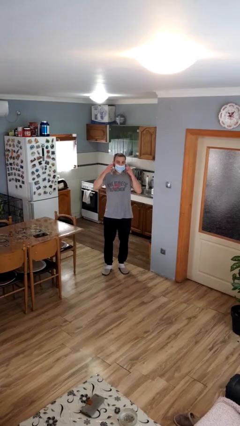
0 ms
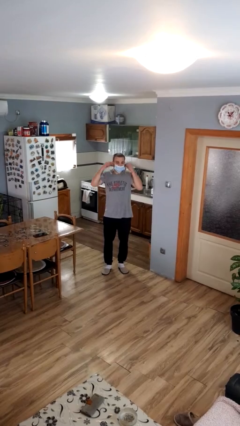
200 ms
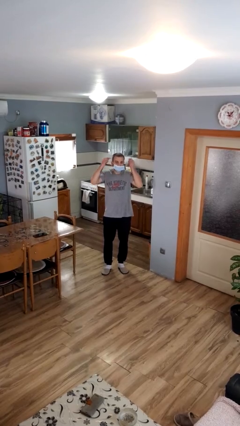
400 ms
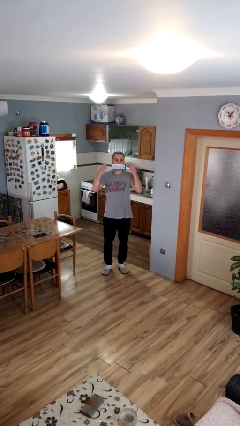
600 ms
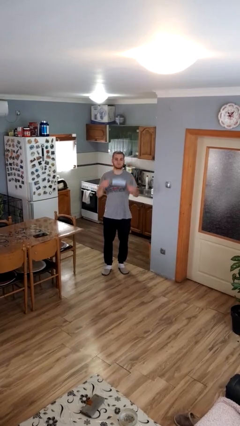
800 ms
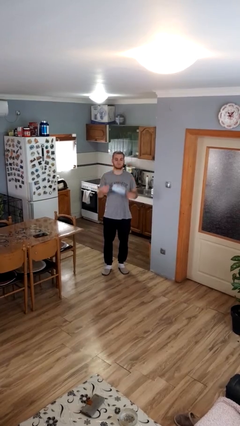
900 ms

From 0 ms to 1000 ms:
person takes off facemask

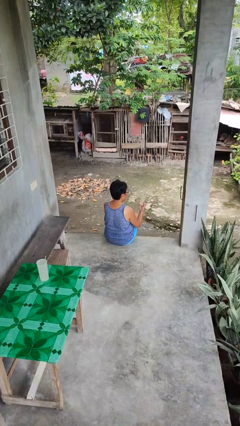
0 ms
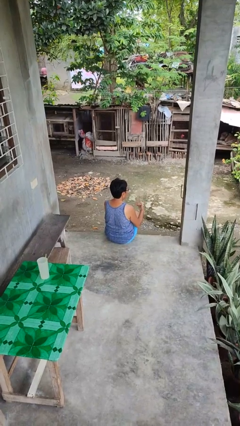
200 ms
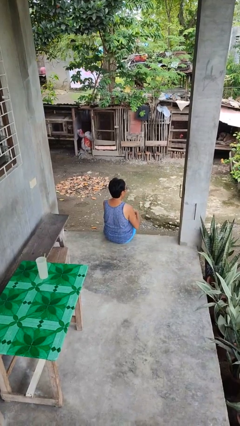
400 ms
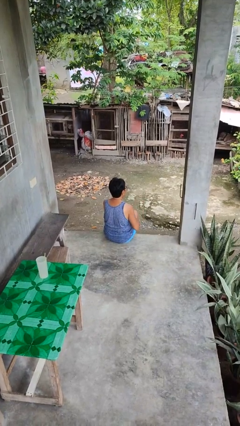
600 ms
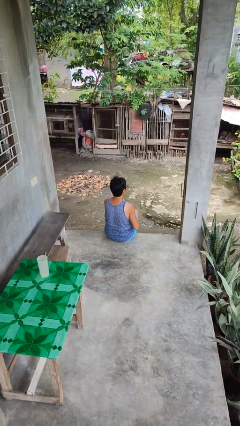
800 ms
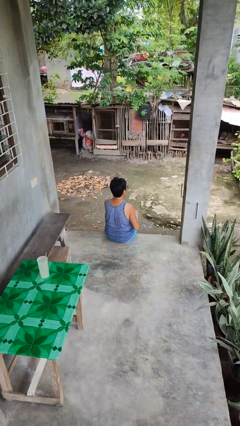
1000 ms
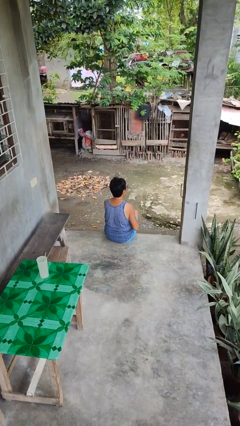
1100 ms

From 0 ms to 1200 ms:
person puts phone into pocket

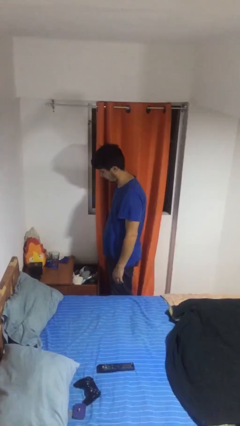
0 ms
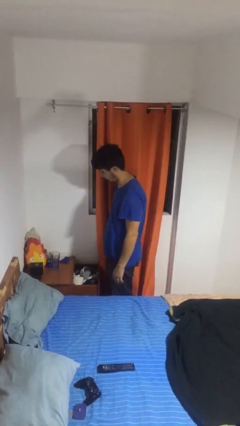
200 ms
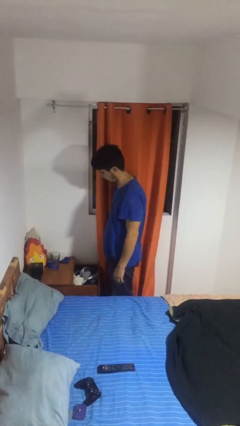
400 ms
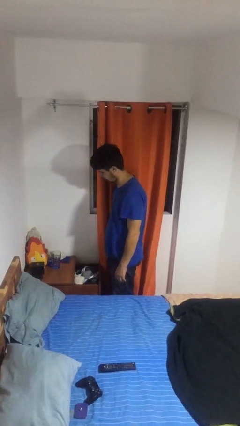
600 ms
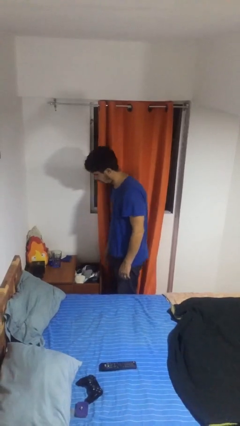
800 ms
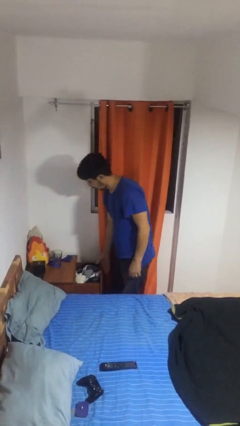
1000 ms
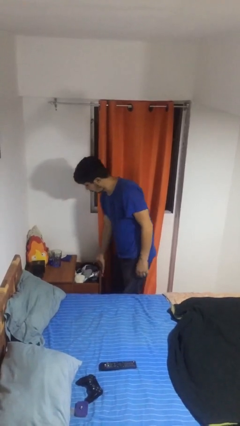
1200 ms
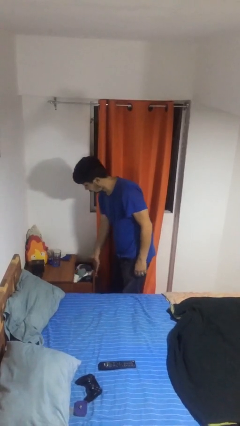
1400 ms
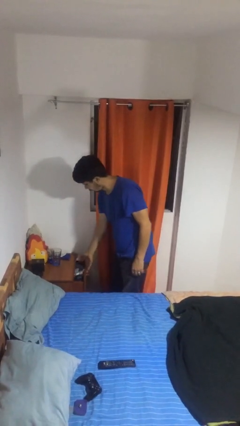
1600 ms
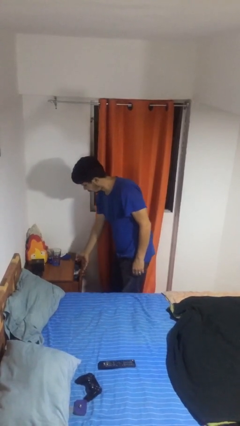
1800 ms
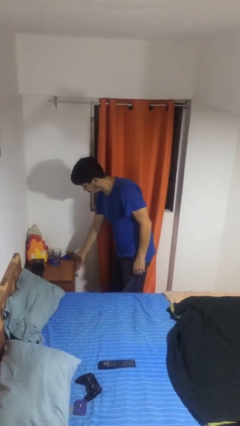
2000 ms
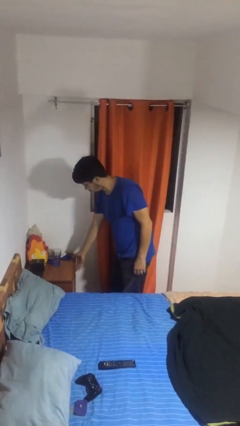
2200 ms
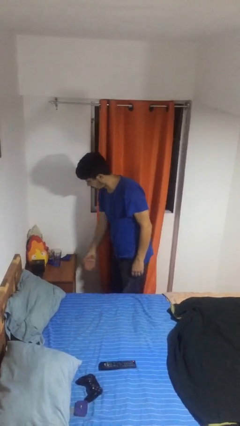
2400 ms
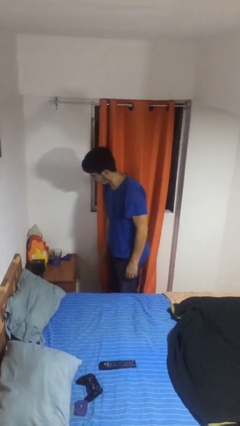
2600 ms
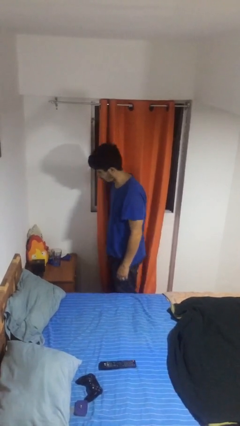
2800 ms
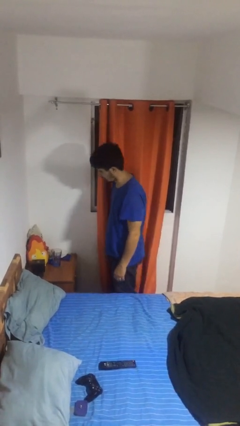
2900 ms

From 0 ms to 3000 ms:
person closes dresser drawer

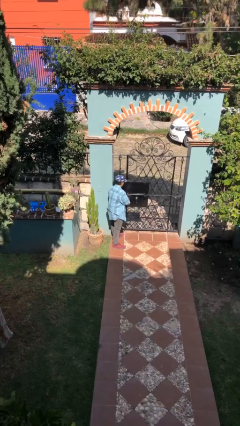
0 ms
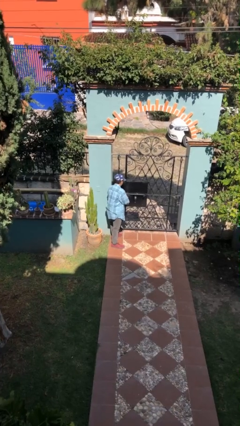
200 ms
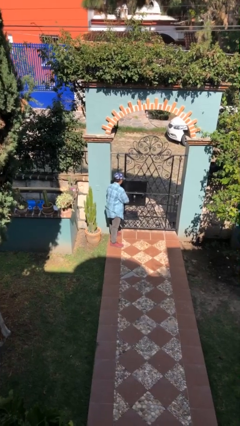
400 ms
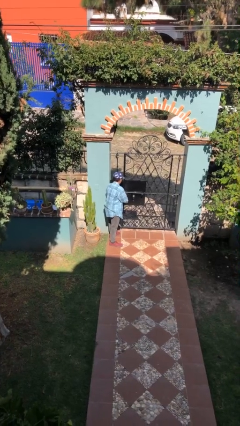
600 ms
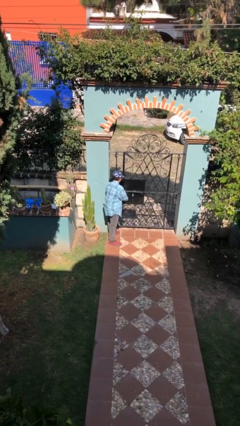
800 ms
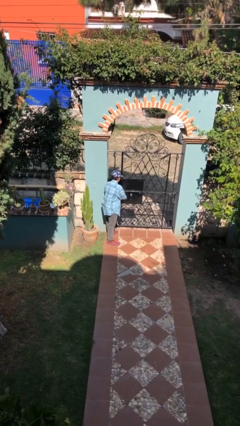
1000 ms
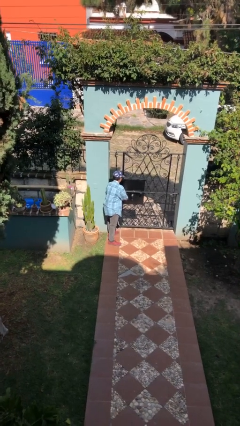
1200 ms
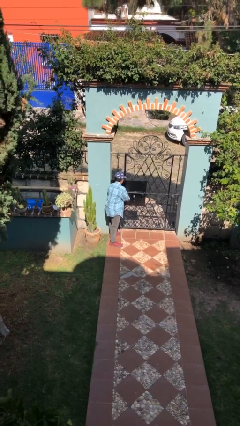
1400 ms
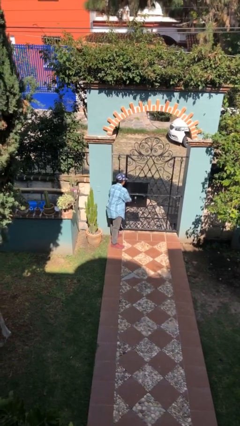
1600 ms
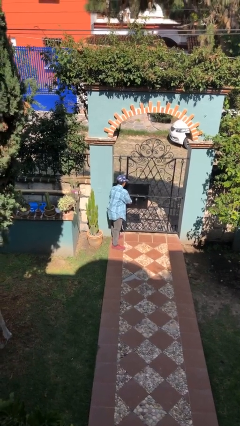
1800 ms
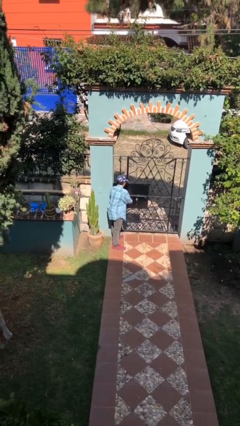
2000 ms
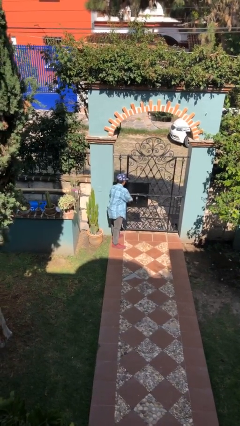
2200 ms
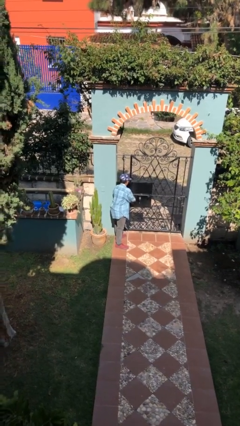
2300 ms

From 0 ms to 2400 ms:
person unlocks door with keys

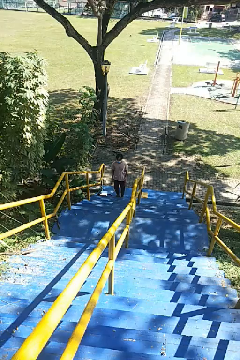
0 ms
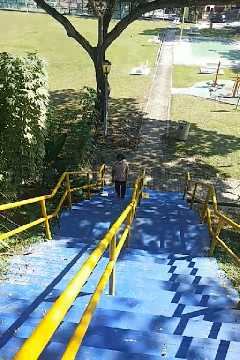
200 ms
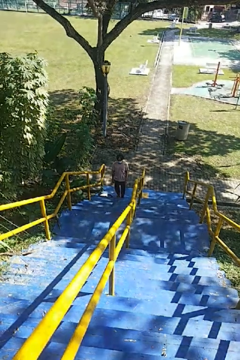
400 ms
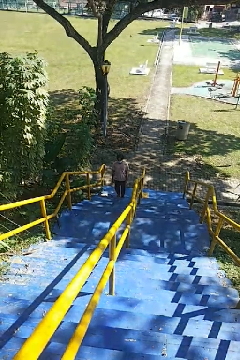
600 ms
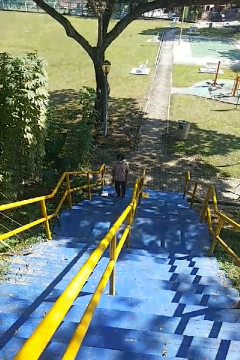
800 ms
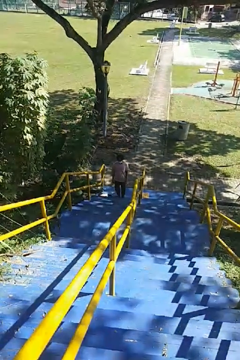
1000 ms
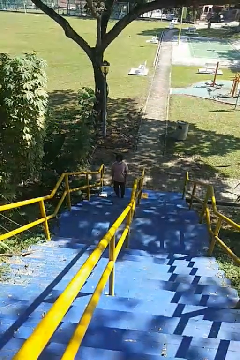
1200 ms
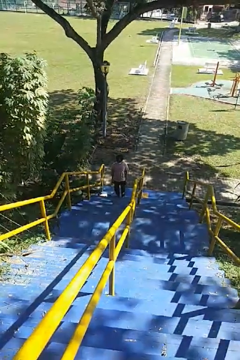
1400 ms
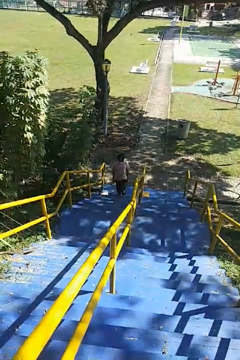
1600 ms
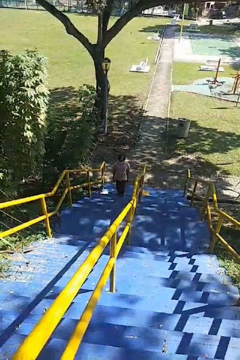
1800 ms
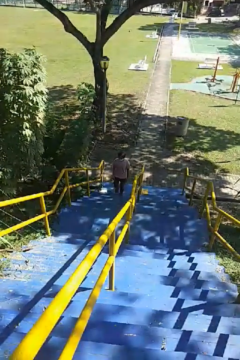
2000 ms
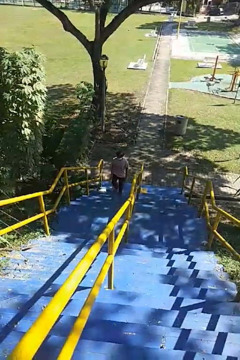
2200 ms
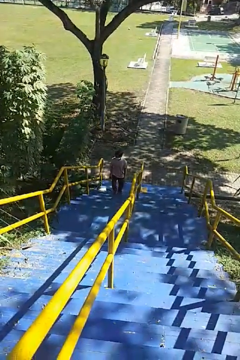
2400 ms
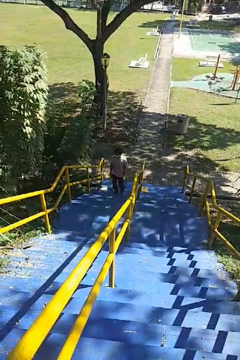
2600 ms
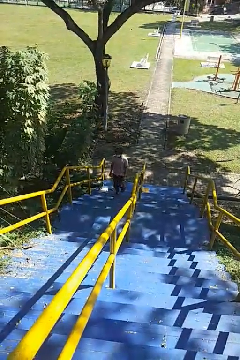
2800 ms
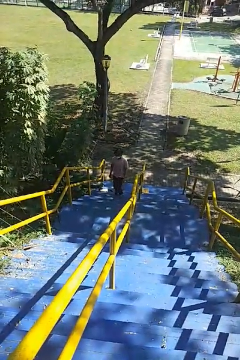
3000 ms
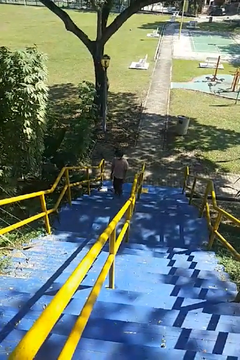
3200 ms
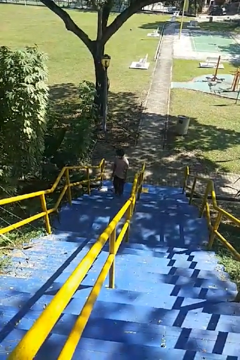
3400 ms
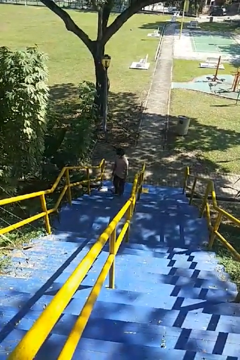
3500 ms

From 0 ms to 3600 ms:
person climbs up stairs

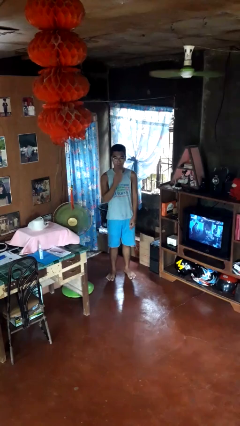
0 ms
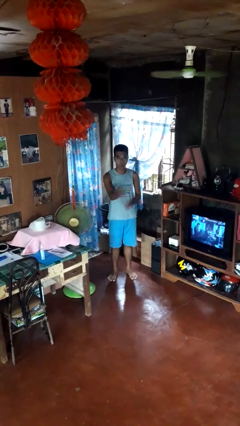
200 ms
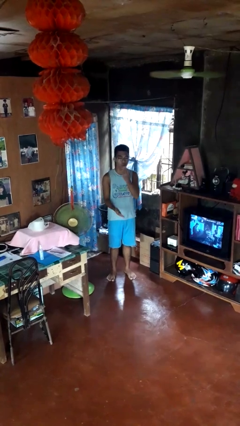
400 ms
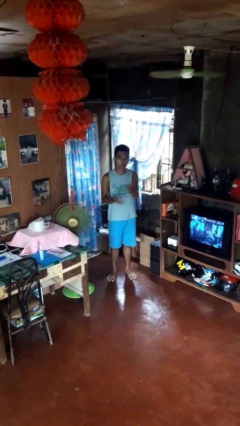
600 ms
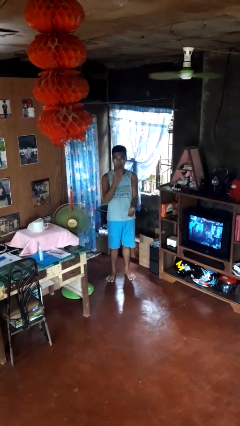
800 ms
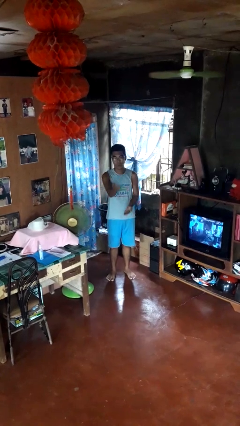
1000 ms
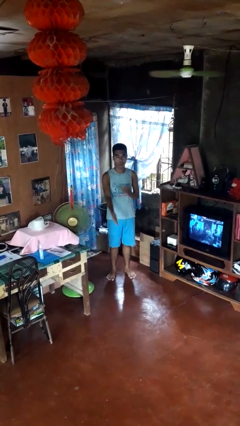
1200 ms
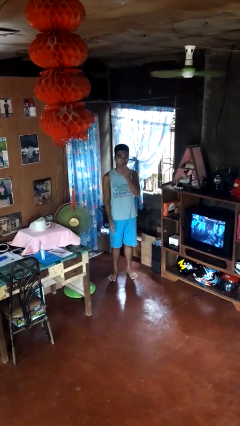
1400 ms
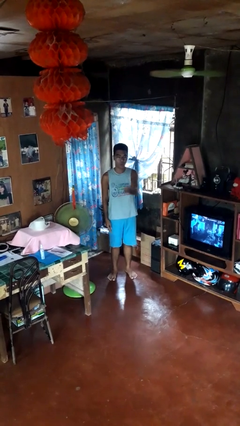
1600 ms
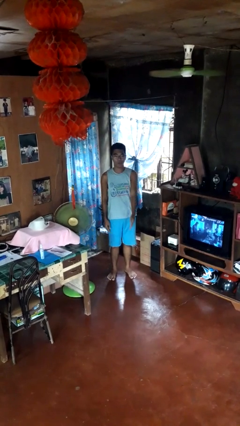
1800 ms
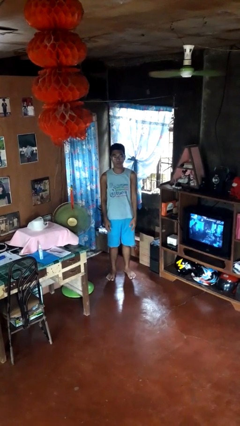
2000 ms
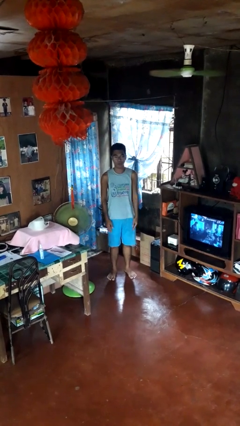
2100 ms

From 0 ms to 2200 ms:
person gestures blow kiss

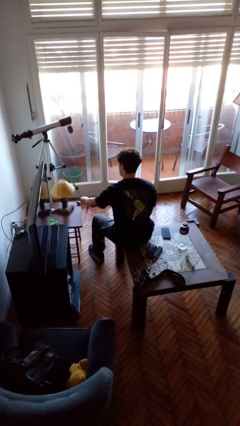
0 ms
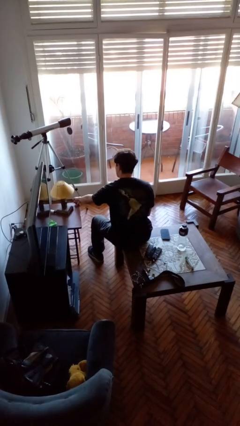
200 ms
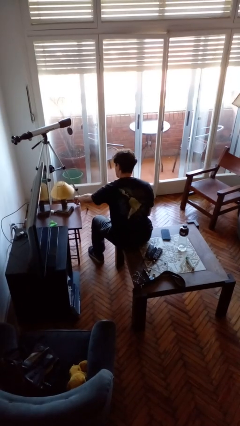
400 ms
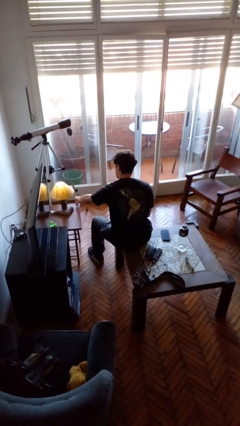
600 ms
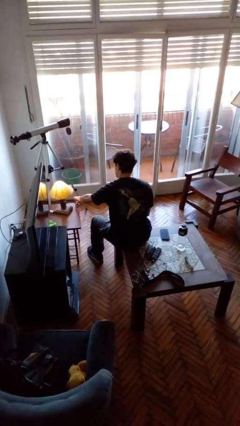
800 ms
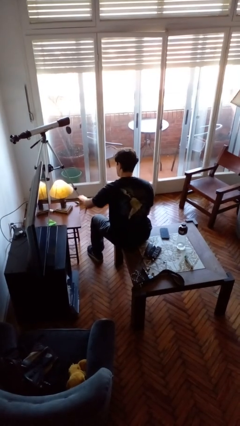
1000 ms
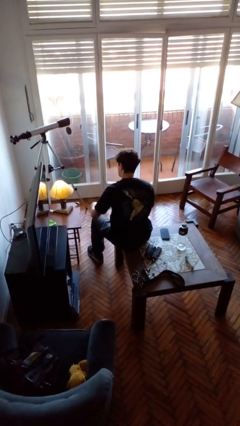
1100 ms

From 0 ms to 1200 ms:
person turns on lamp

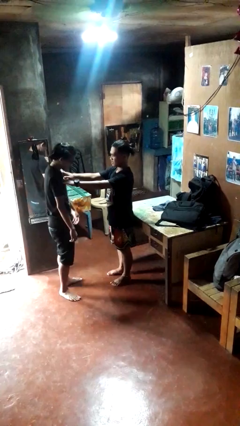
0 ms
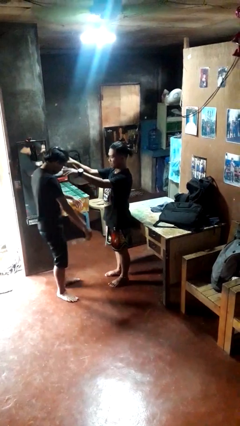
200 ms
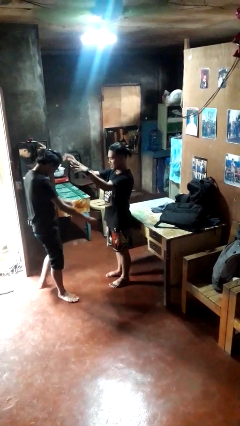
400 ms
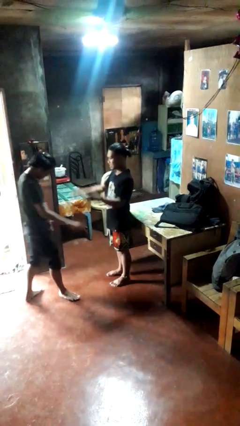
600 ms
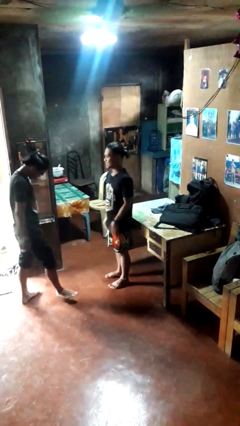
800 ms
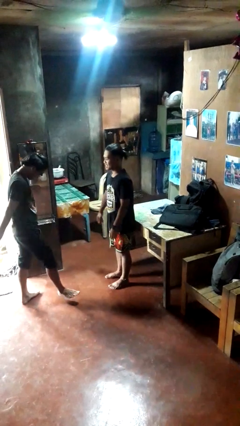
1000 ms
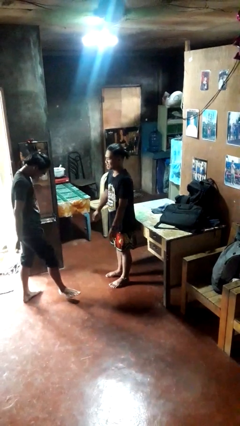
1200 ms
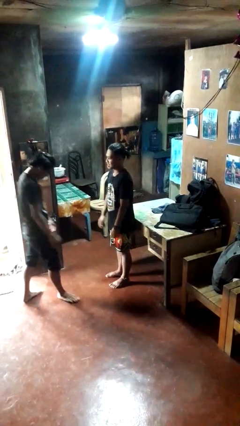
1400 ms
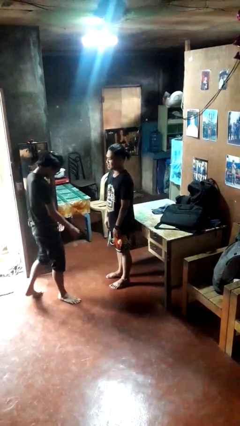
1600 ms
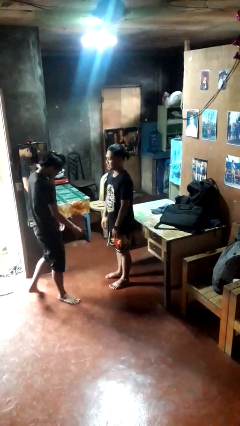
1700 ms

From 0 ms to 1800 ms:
person shoves person

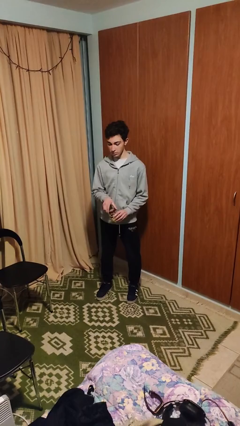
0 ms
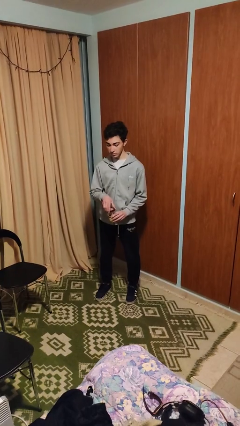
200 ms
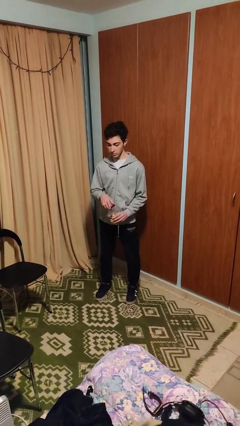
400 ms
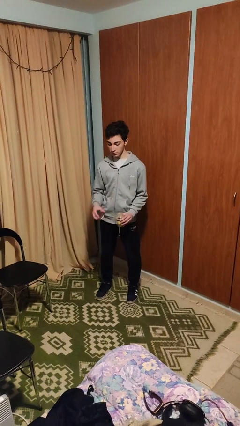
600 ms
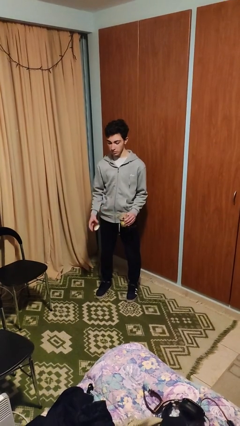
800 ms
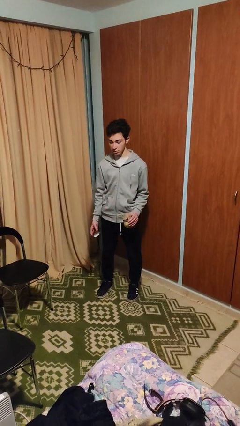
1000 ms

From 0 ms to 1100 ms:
person opens jar

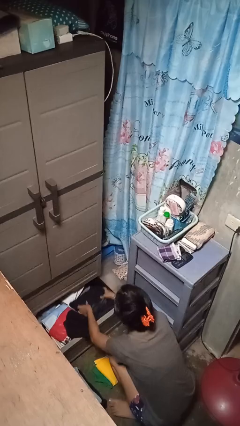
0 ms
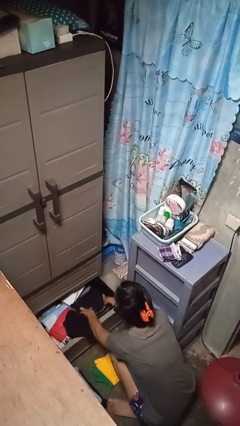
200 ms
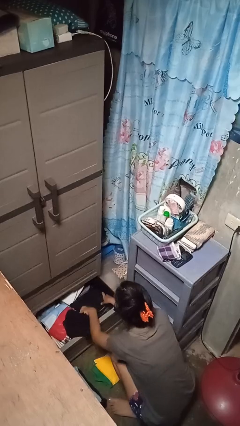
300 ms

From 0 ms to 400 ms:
person puts clothes into dresser
